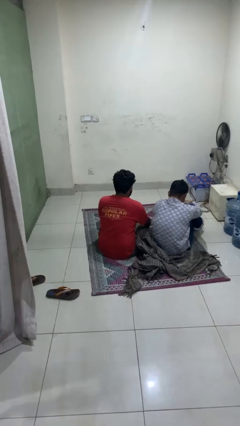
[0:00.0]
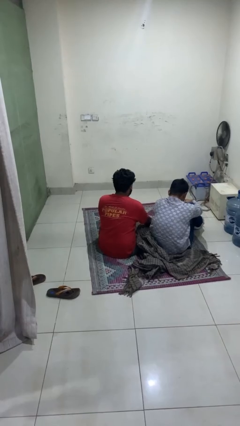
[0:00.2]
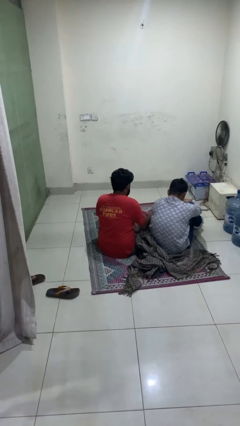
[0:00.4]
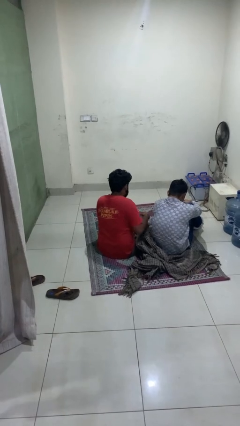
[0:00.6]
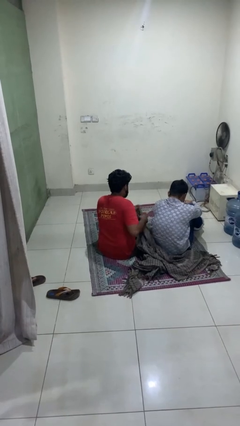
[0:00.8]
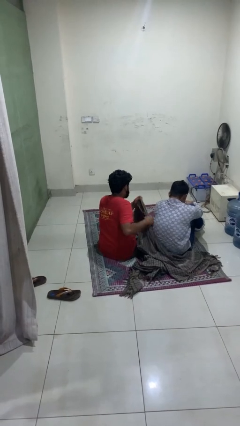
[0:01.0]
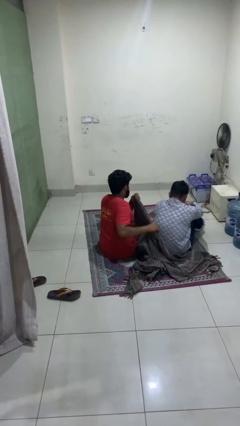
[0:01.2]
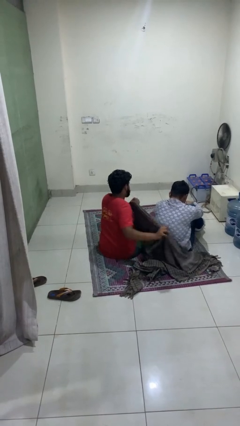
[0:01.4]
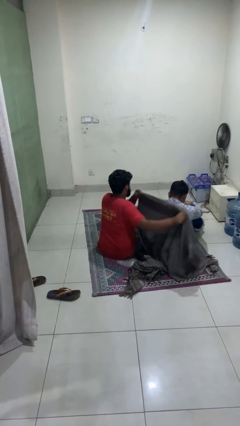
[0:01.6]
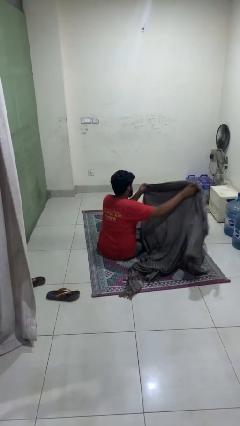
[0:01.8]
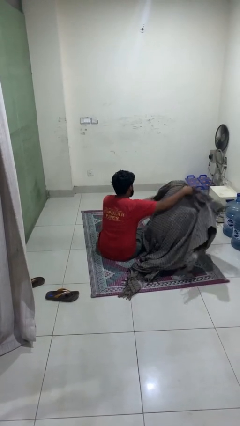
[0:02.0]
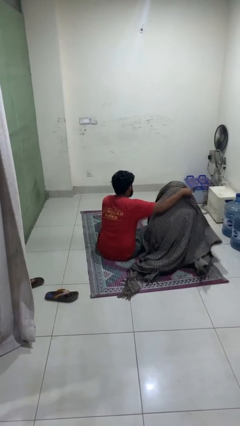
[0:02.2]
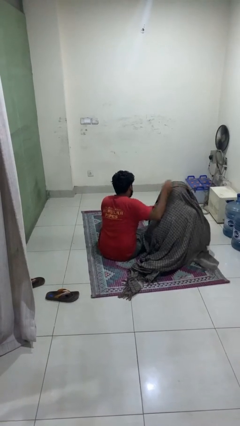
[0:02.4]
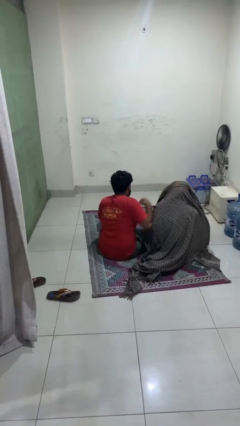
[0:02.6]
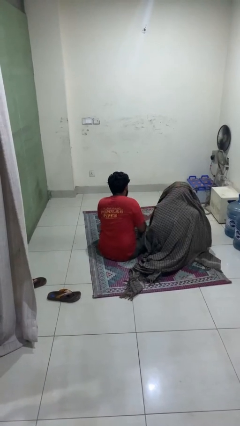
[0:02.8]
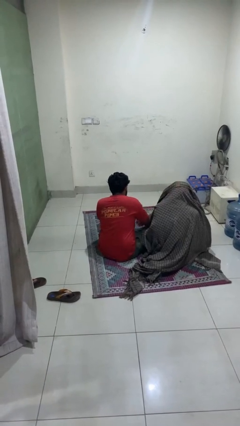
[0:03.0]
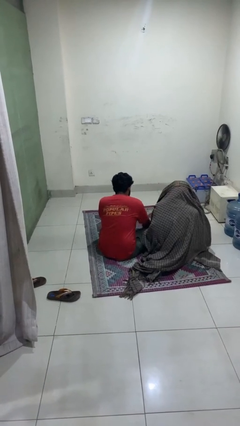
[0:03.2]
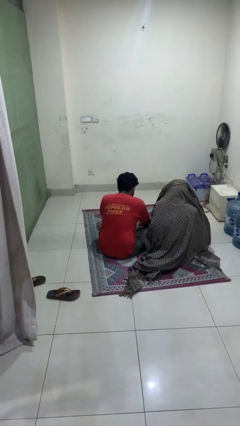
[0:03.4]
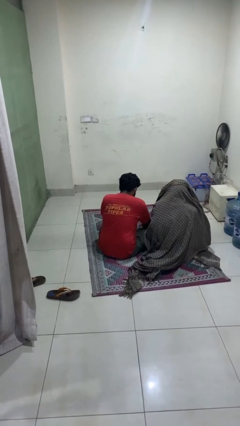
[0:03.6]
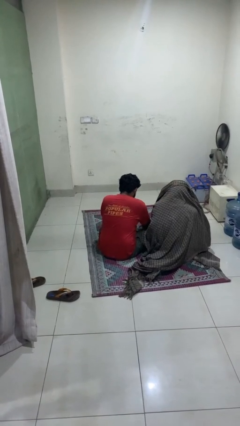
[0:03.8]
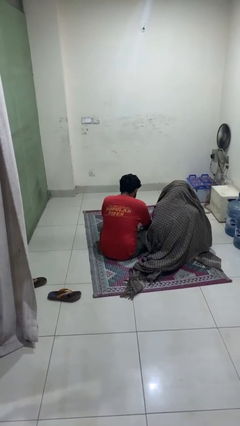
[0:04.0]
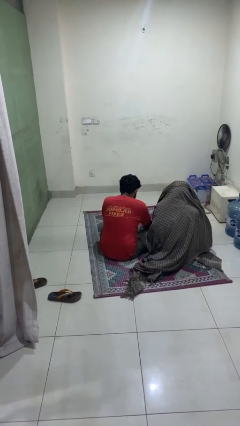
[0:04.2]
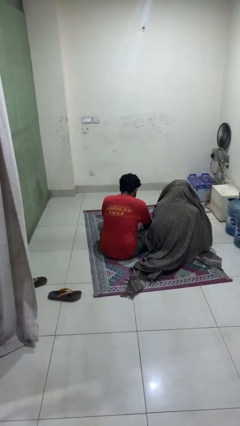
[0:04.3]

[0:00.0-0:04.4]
person covers friend with blanket

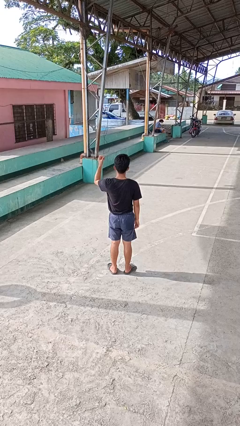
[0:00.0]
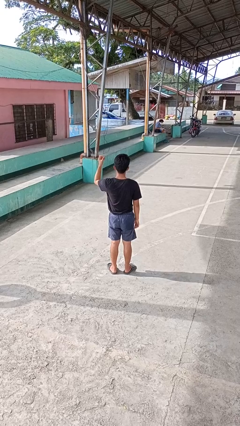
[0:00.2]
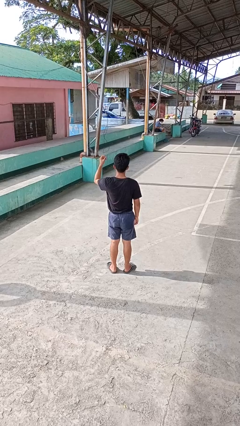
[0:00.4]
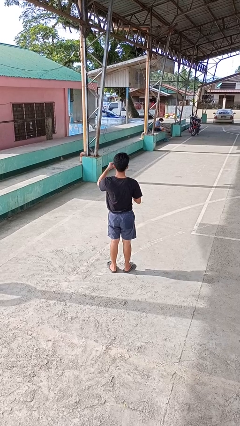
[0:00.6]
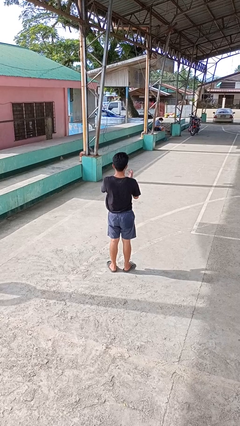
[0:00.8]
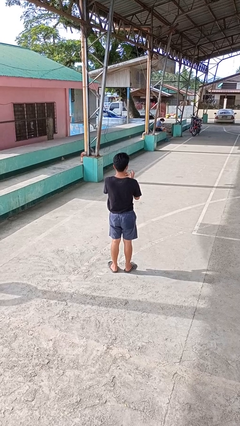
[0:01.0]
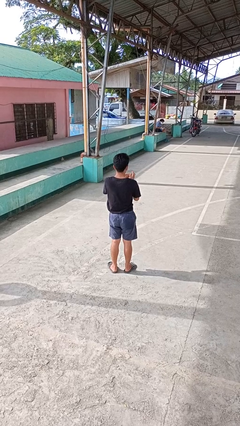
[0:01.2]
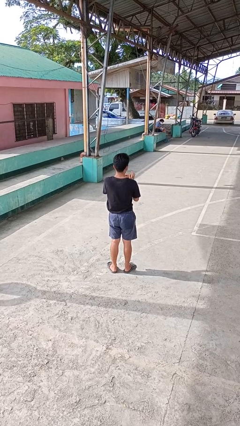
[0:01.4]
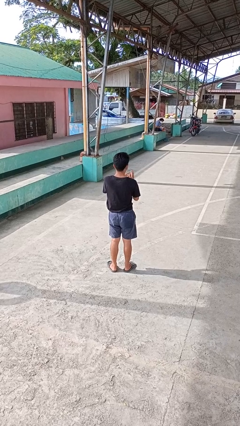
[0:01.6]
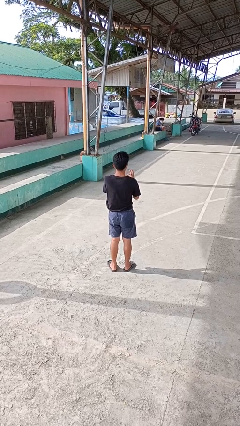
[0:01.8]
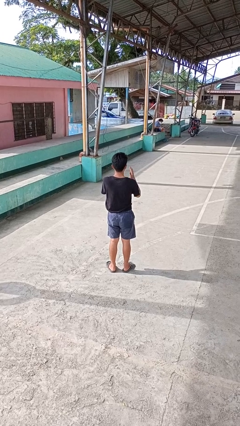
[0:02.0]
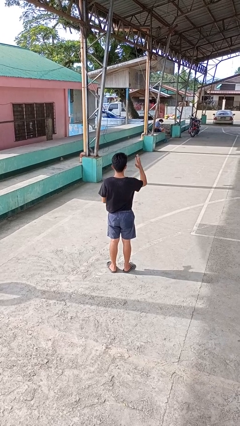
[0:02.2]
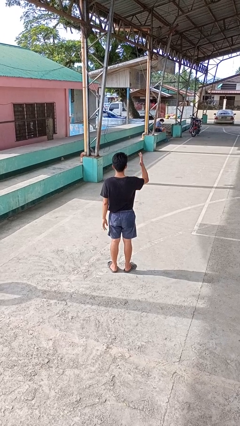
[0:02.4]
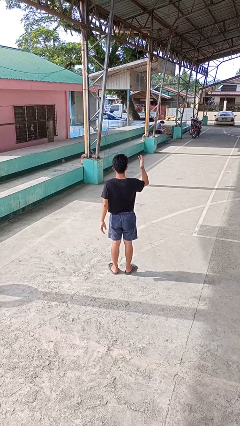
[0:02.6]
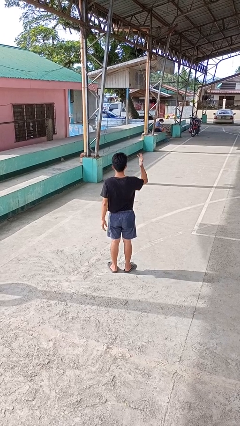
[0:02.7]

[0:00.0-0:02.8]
person puts on ring

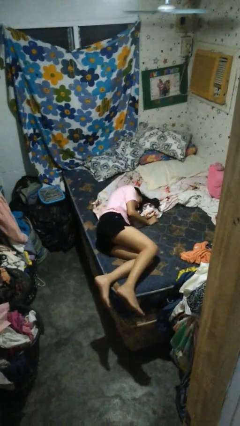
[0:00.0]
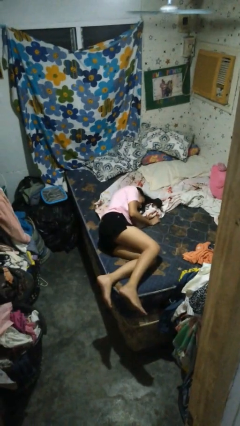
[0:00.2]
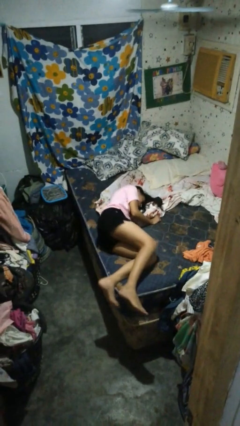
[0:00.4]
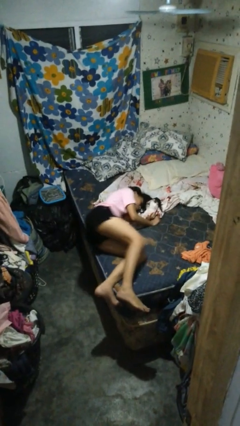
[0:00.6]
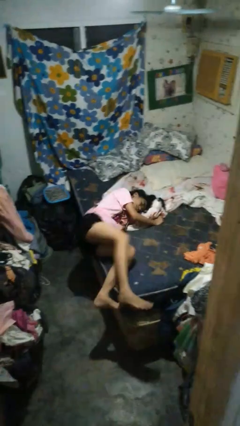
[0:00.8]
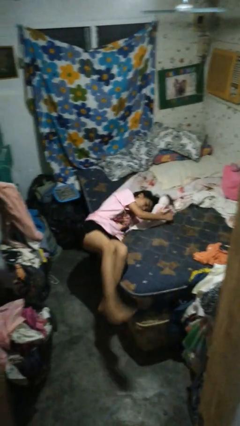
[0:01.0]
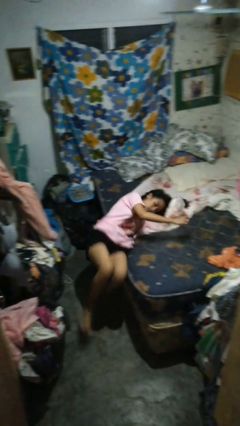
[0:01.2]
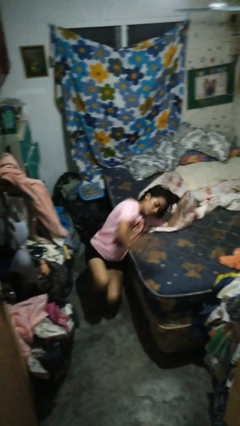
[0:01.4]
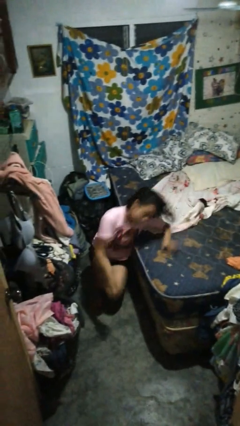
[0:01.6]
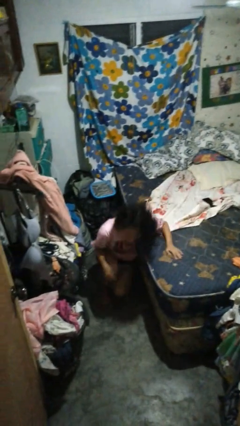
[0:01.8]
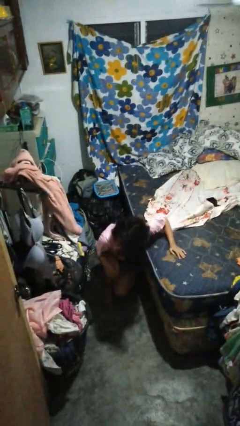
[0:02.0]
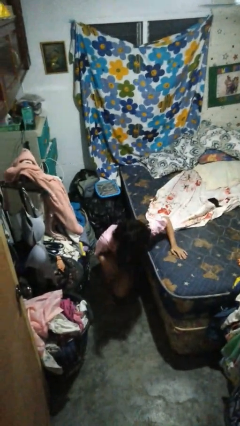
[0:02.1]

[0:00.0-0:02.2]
person falls from bed

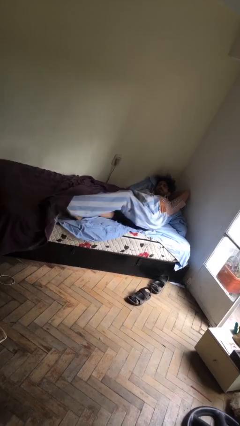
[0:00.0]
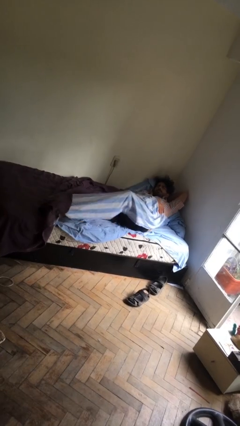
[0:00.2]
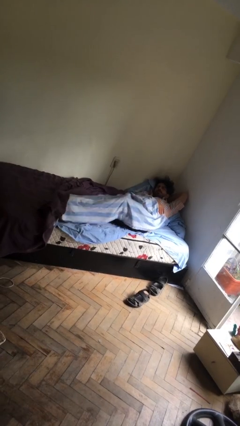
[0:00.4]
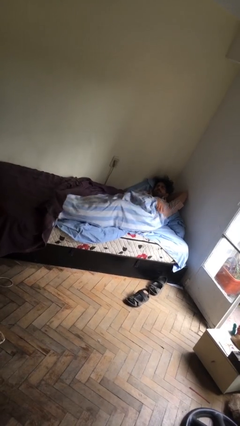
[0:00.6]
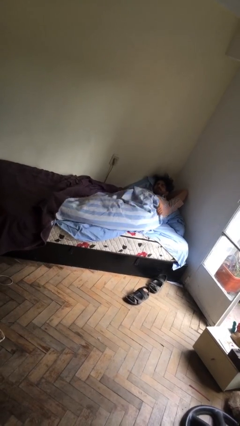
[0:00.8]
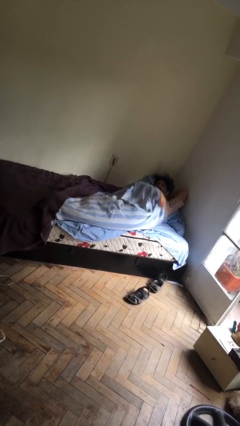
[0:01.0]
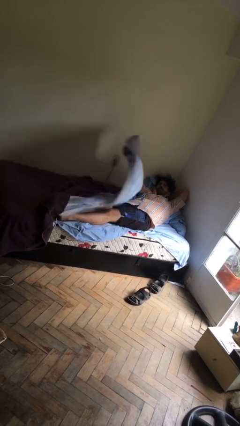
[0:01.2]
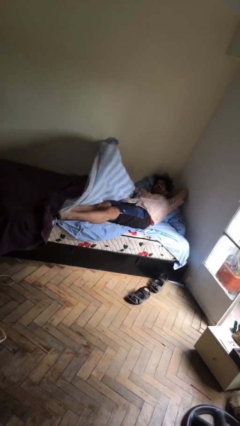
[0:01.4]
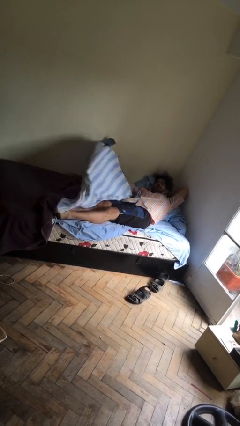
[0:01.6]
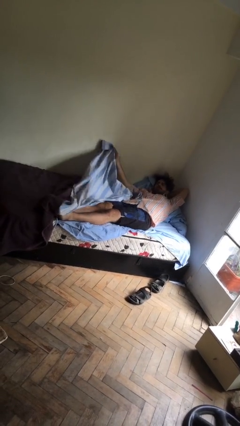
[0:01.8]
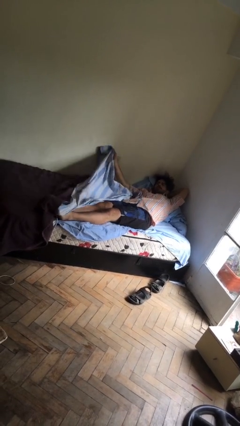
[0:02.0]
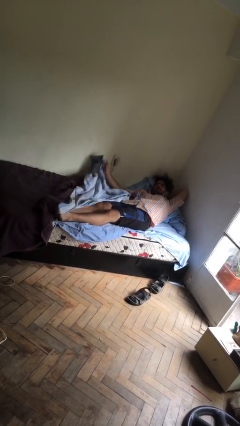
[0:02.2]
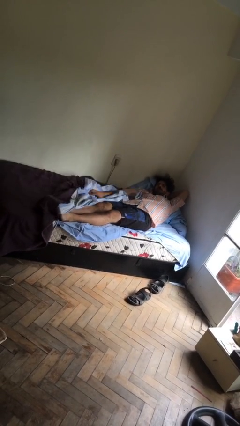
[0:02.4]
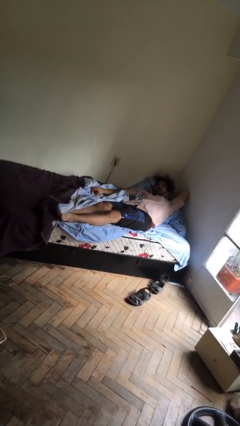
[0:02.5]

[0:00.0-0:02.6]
person uncovers with bedsheets

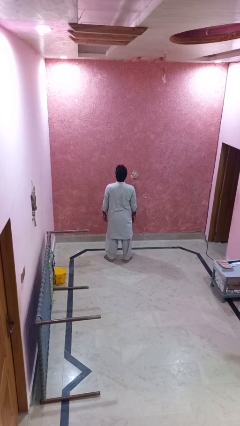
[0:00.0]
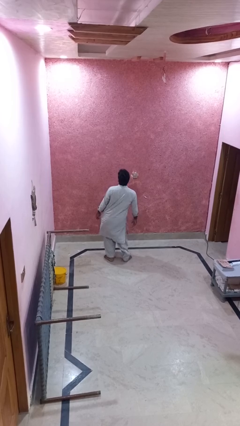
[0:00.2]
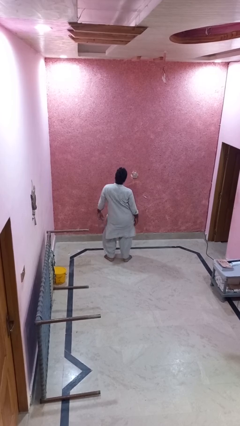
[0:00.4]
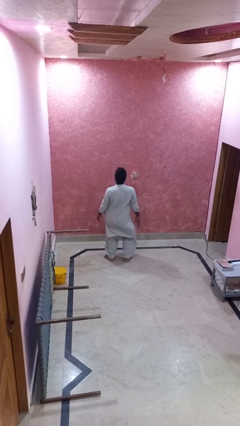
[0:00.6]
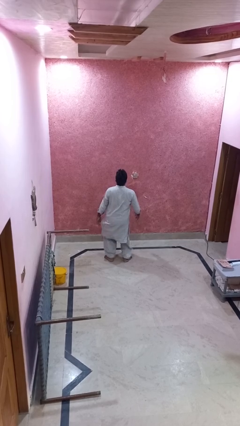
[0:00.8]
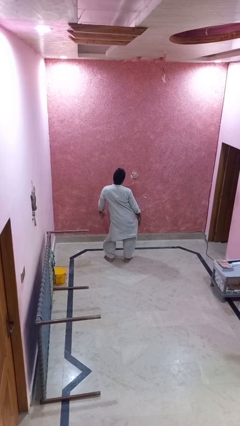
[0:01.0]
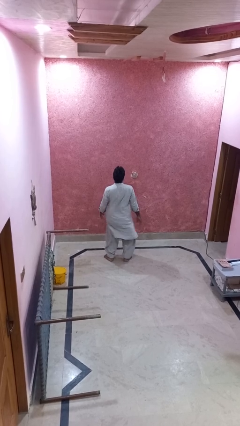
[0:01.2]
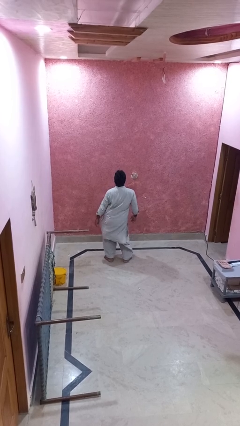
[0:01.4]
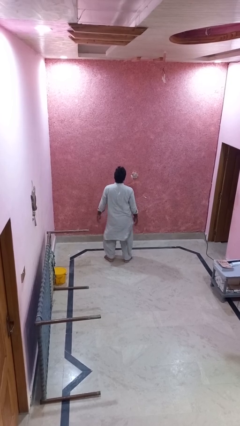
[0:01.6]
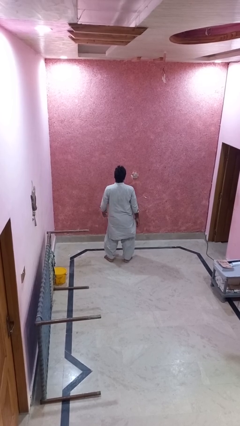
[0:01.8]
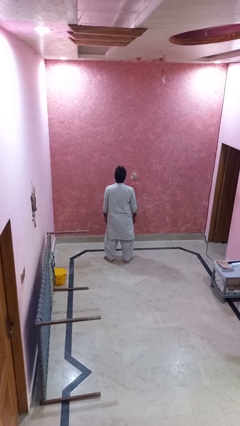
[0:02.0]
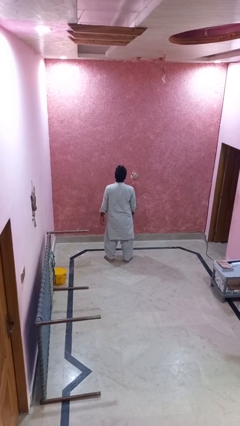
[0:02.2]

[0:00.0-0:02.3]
person wiggles hips

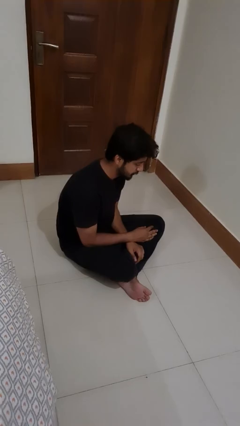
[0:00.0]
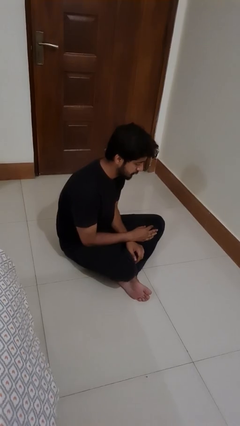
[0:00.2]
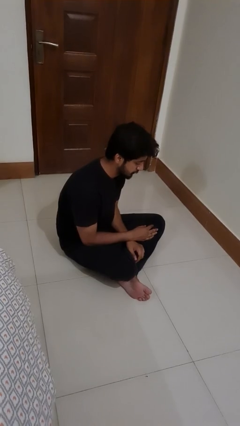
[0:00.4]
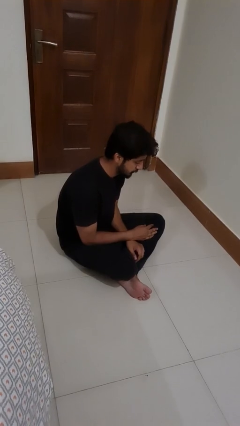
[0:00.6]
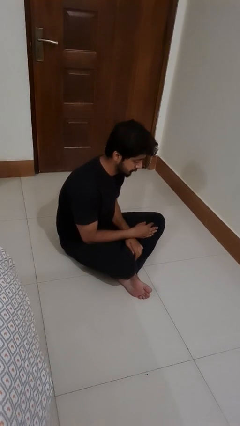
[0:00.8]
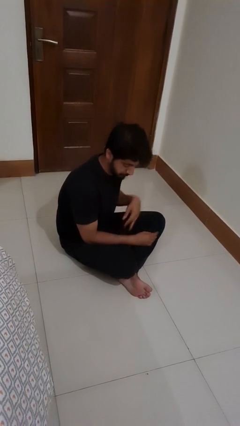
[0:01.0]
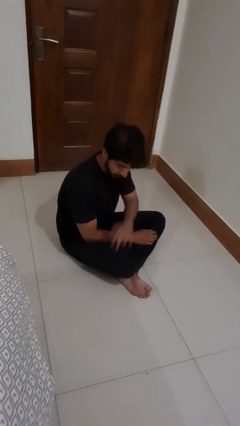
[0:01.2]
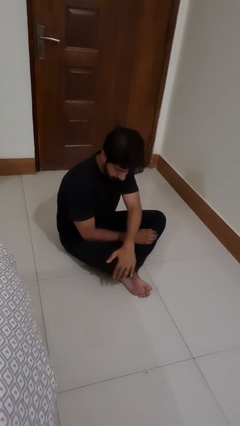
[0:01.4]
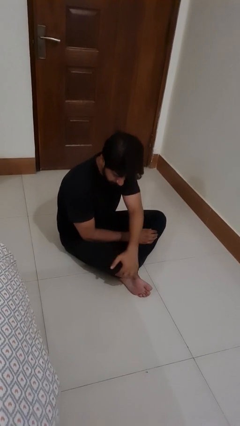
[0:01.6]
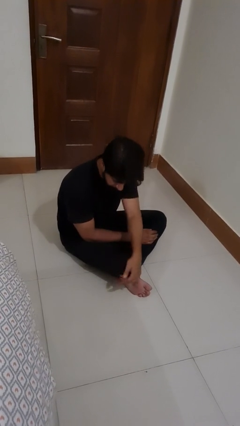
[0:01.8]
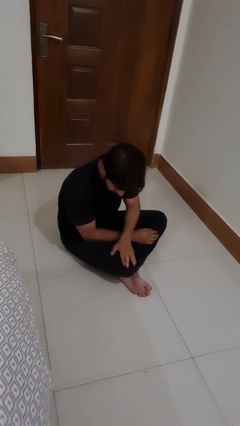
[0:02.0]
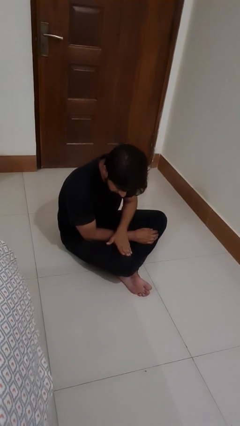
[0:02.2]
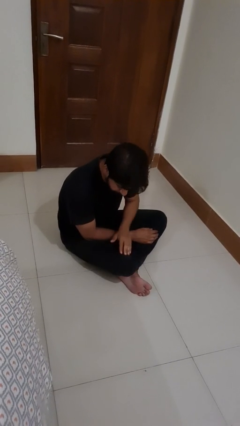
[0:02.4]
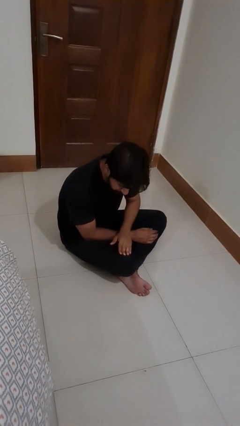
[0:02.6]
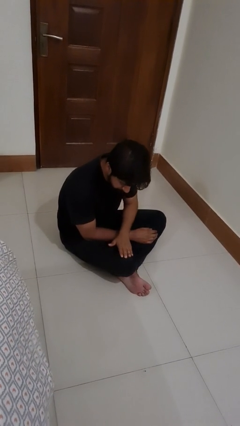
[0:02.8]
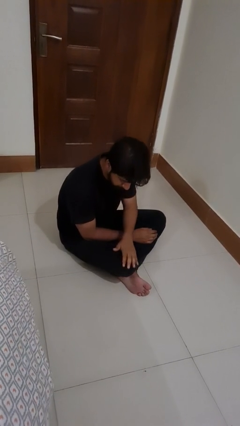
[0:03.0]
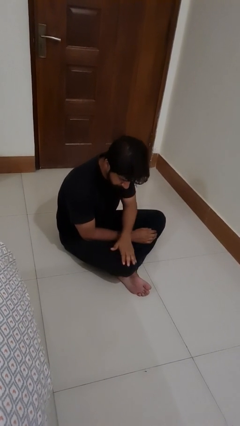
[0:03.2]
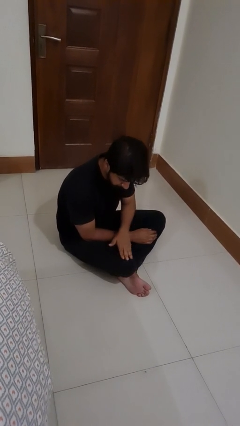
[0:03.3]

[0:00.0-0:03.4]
person swats bug
